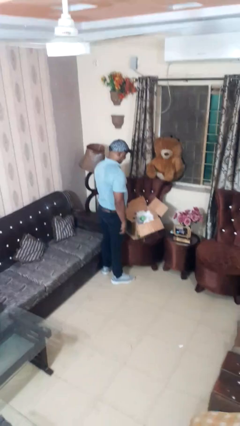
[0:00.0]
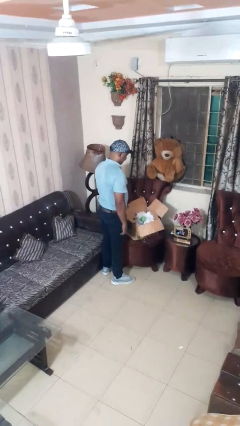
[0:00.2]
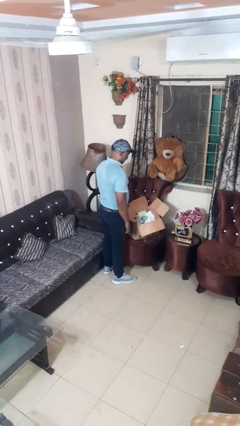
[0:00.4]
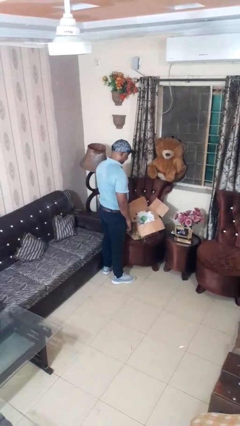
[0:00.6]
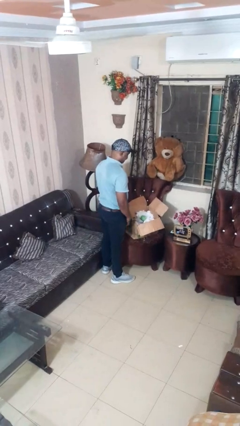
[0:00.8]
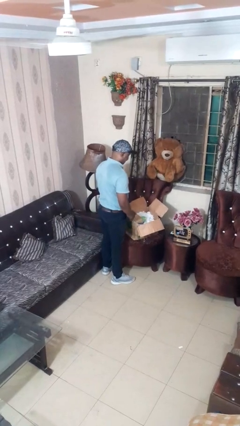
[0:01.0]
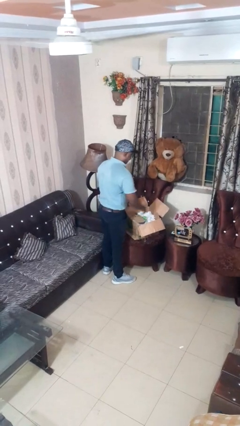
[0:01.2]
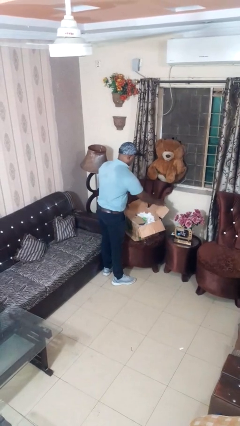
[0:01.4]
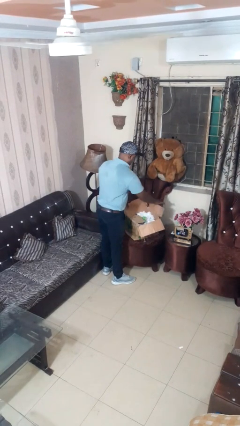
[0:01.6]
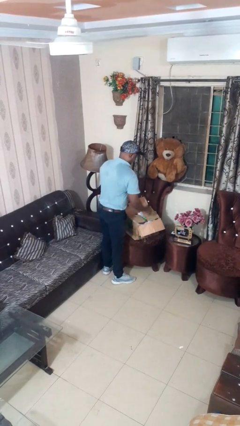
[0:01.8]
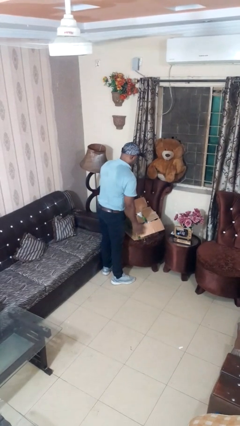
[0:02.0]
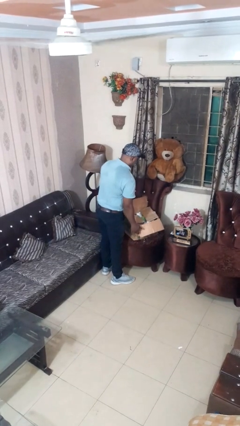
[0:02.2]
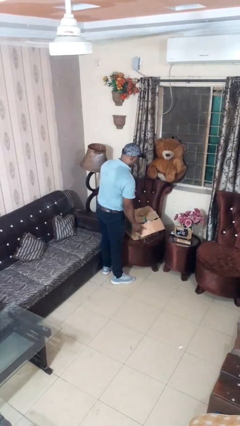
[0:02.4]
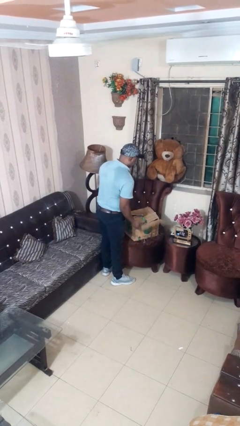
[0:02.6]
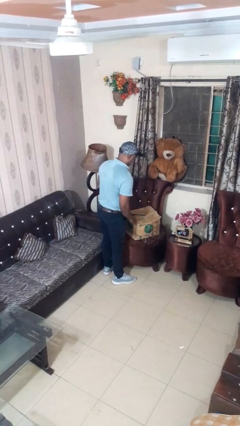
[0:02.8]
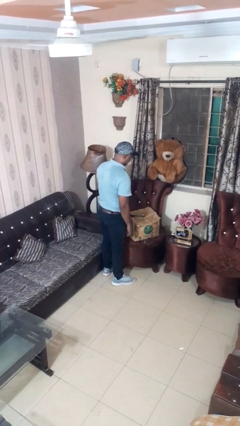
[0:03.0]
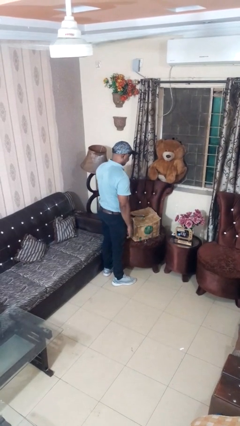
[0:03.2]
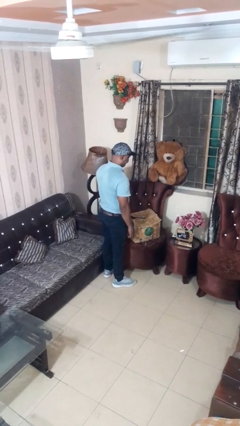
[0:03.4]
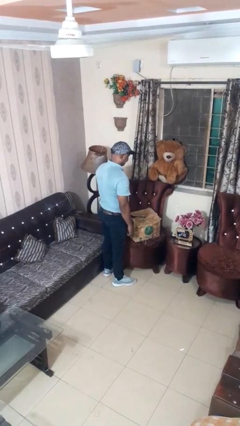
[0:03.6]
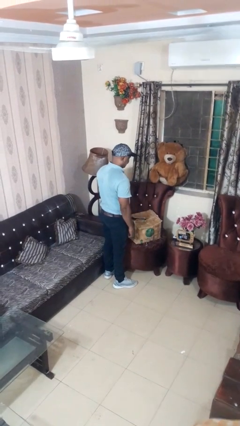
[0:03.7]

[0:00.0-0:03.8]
person closes box

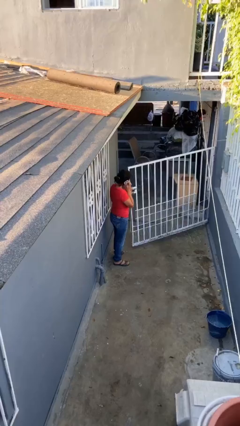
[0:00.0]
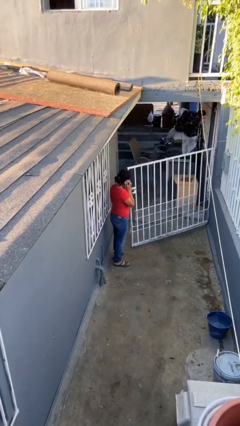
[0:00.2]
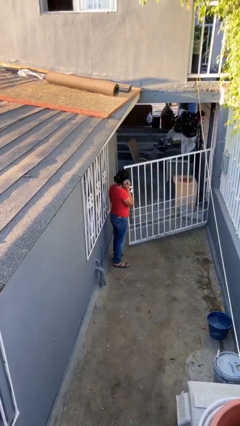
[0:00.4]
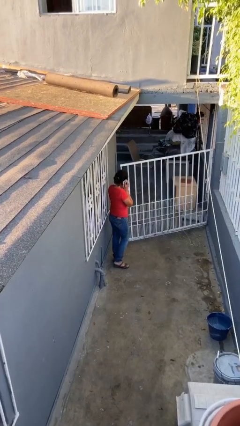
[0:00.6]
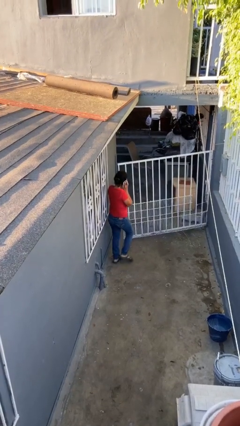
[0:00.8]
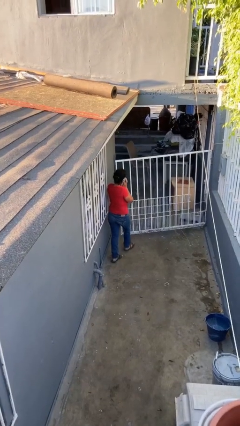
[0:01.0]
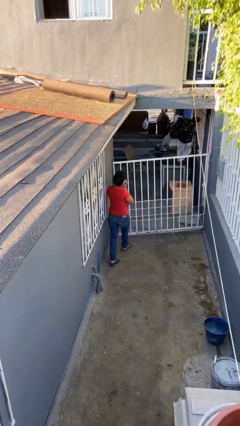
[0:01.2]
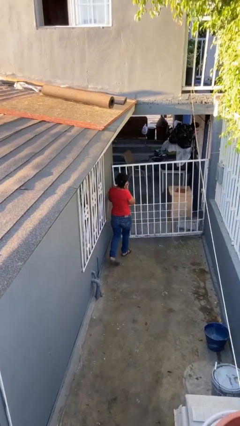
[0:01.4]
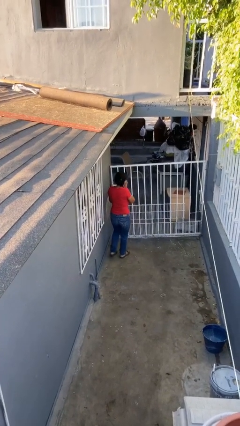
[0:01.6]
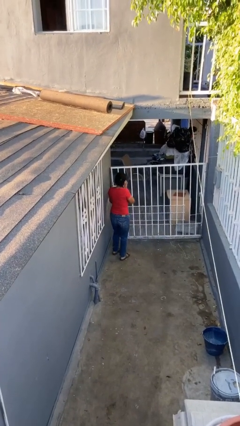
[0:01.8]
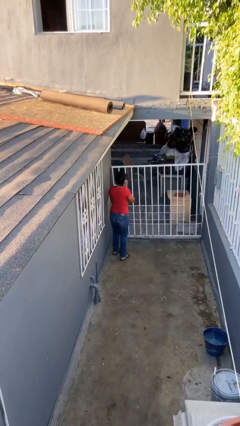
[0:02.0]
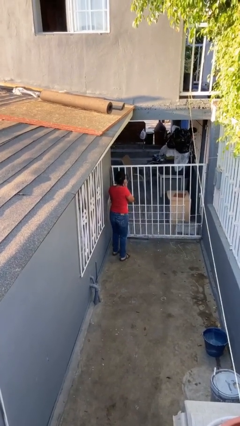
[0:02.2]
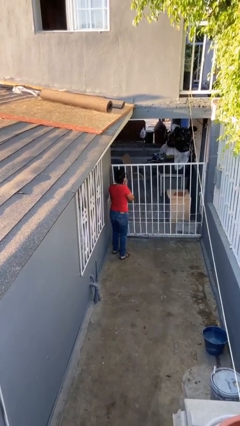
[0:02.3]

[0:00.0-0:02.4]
person closes facility door

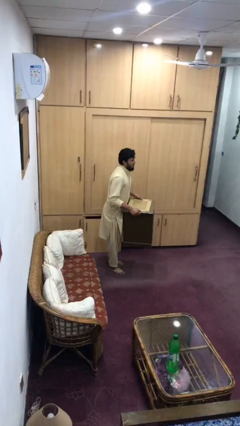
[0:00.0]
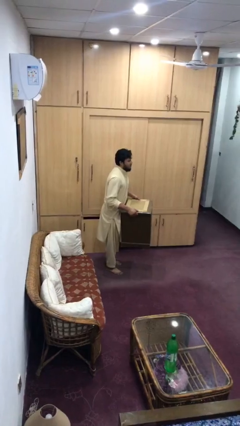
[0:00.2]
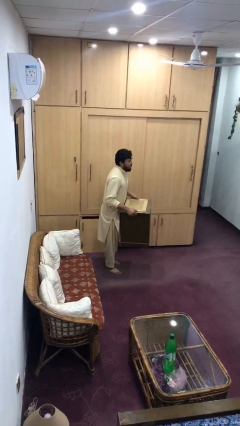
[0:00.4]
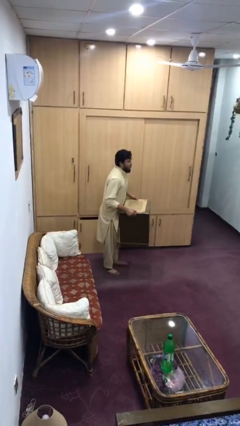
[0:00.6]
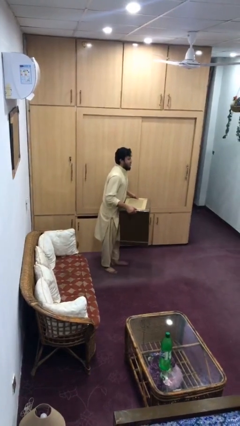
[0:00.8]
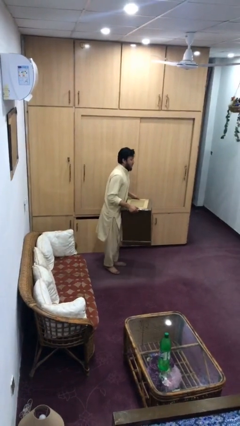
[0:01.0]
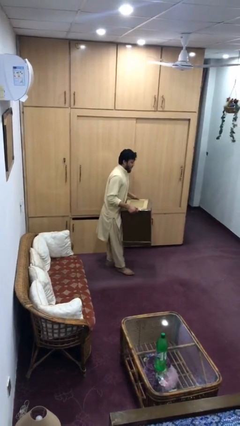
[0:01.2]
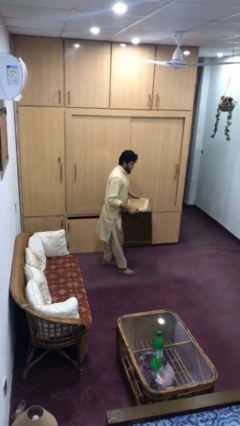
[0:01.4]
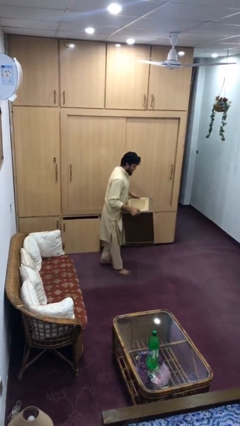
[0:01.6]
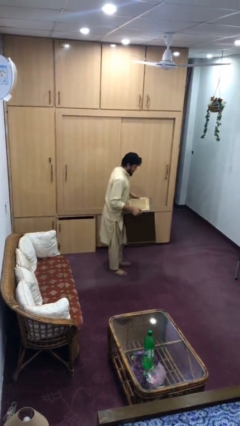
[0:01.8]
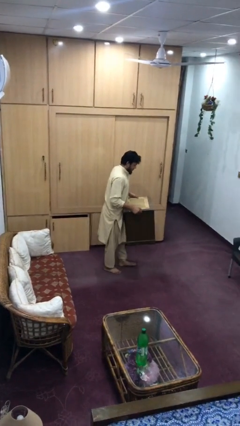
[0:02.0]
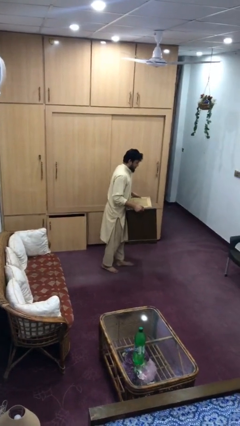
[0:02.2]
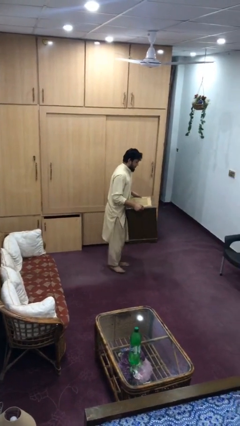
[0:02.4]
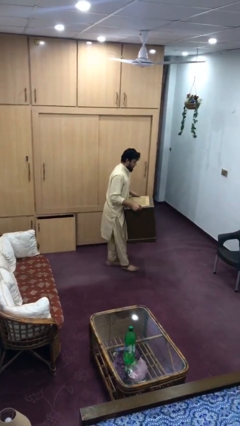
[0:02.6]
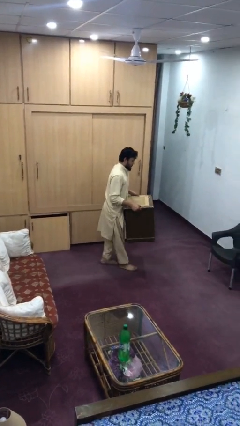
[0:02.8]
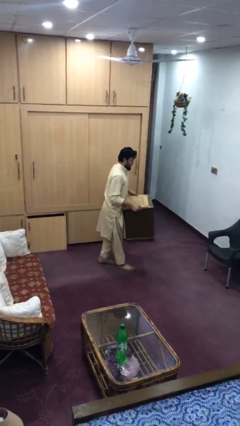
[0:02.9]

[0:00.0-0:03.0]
person carries heavy object

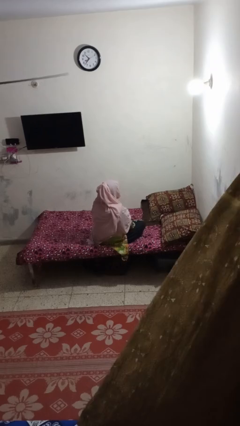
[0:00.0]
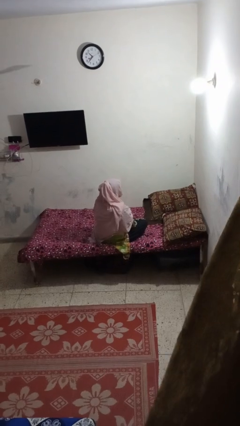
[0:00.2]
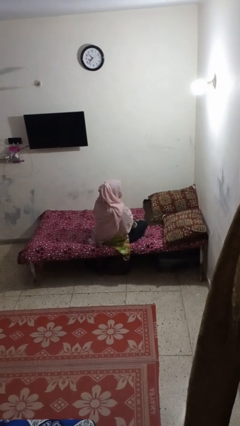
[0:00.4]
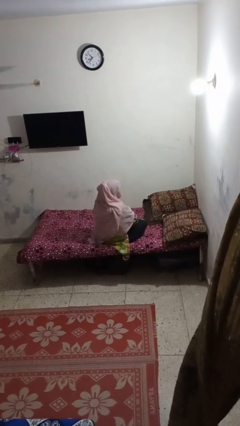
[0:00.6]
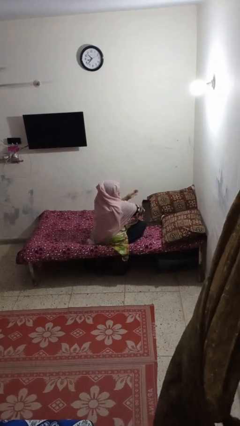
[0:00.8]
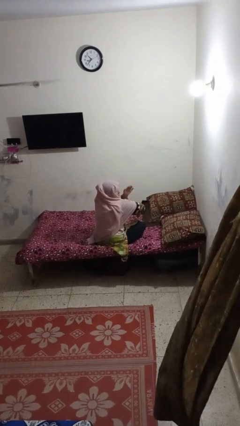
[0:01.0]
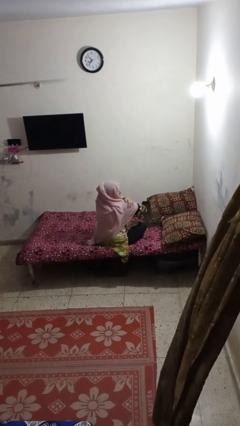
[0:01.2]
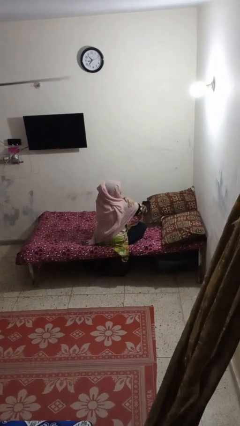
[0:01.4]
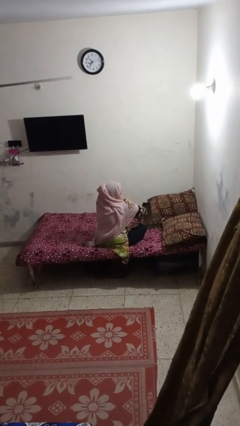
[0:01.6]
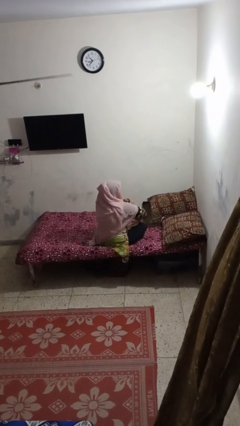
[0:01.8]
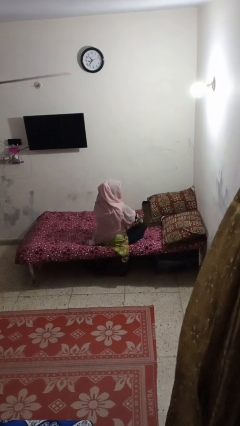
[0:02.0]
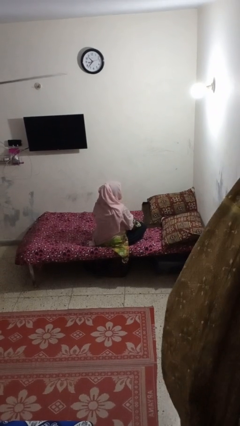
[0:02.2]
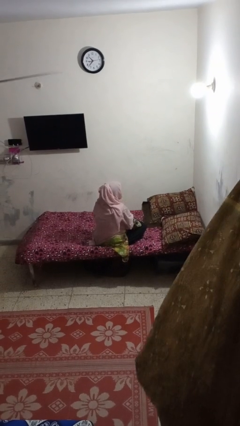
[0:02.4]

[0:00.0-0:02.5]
person swats bug

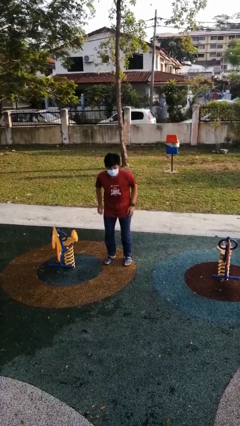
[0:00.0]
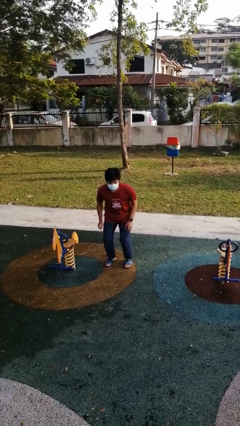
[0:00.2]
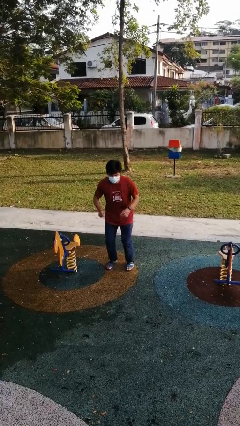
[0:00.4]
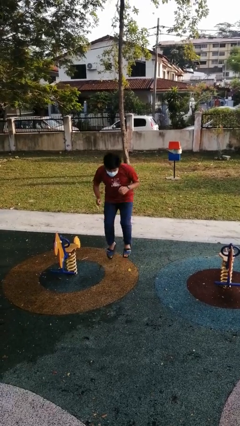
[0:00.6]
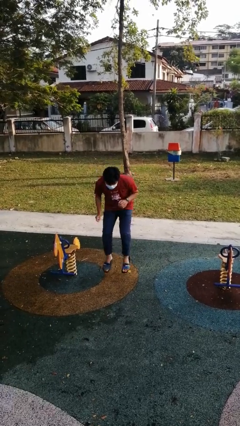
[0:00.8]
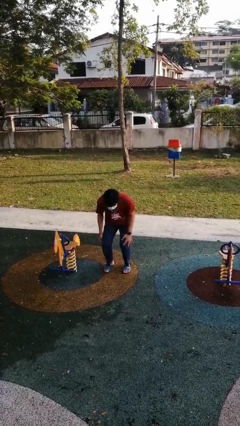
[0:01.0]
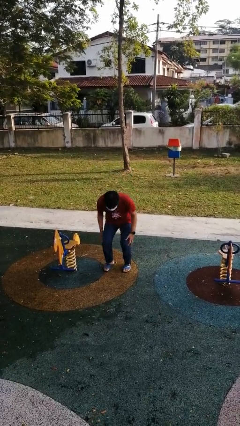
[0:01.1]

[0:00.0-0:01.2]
person jumps

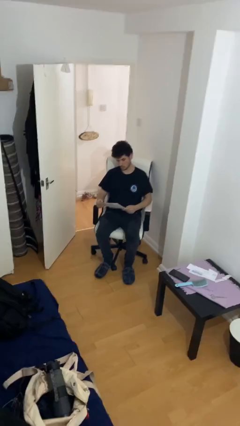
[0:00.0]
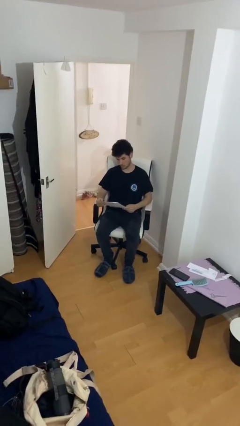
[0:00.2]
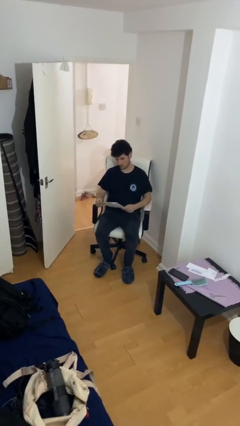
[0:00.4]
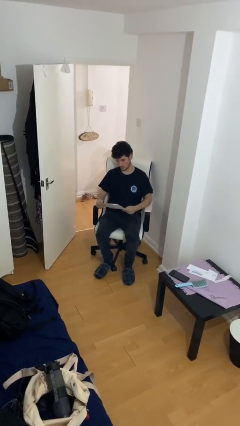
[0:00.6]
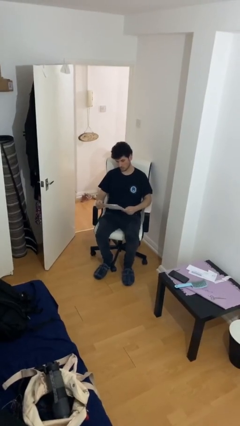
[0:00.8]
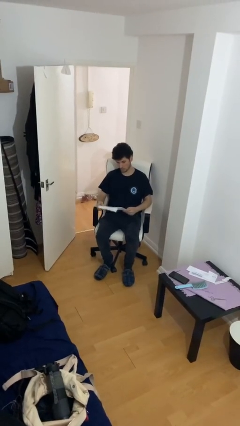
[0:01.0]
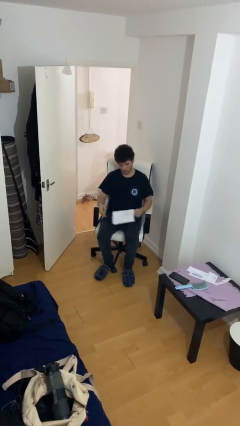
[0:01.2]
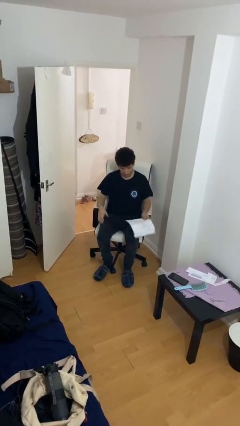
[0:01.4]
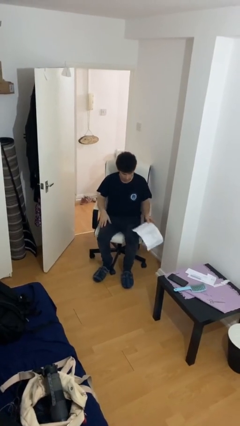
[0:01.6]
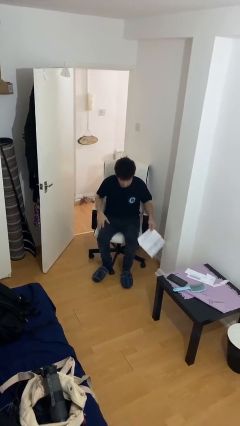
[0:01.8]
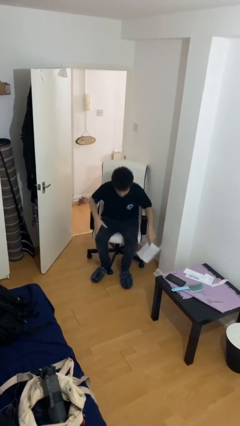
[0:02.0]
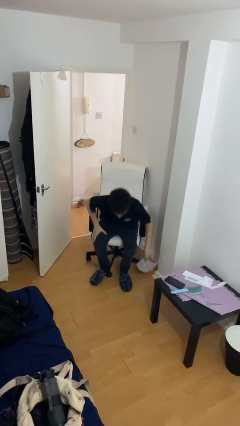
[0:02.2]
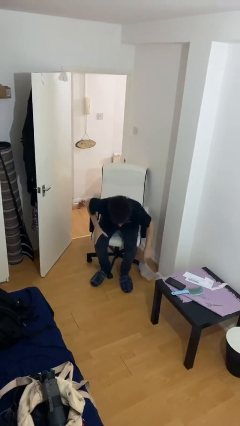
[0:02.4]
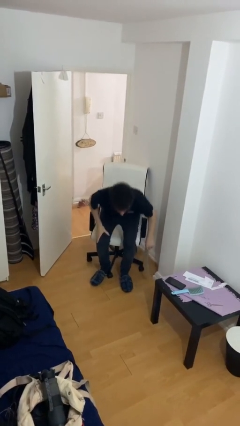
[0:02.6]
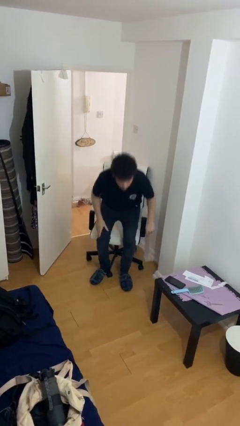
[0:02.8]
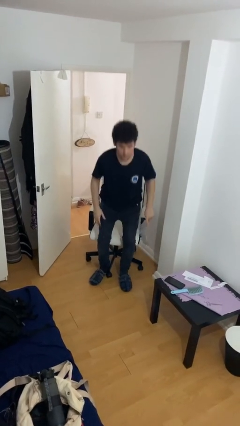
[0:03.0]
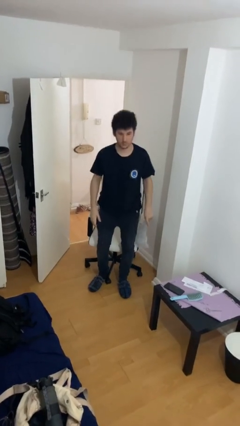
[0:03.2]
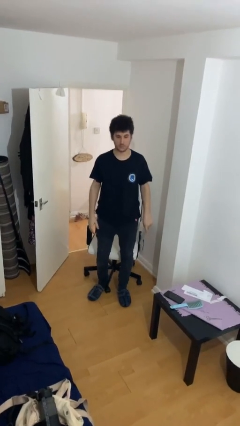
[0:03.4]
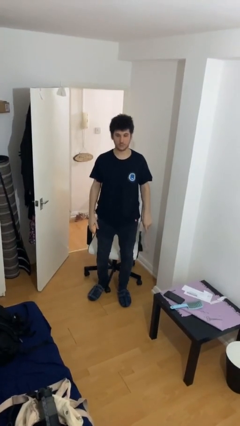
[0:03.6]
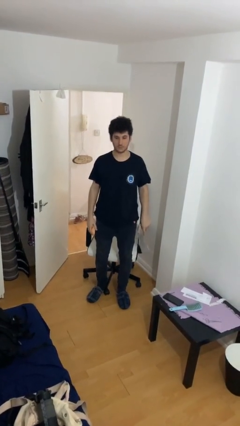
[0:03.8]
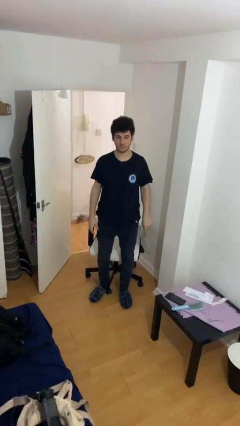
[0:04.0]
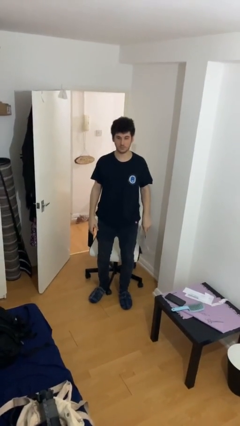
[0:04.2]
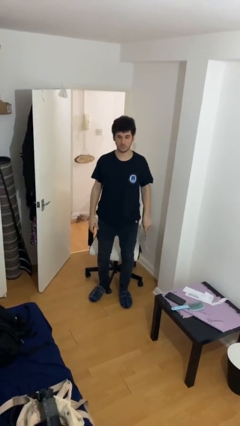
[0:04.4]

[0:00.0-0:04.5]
person stands up

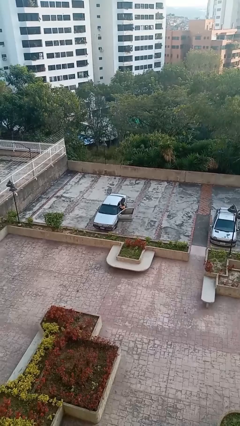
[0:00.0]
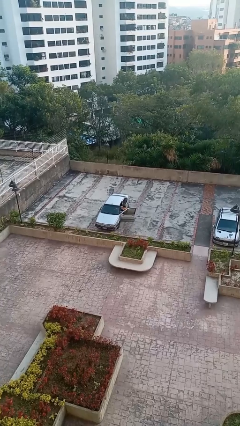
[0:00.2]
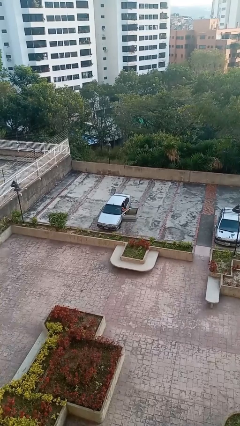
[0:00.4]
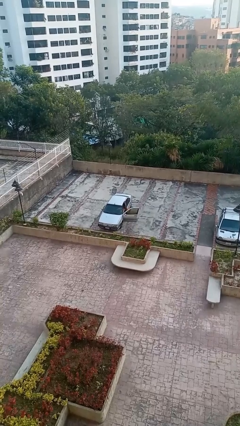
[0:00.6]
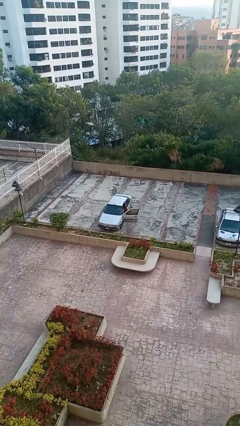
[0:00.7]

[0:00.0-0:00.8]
person enters car
